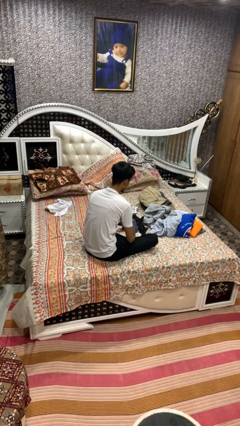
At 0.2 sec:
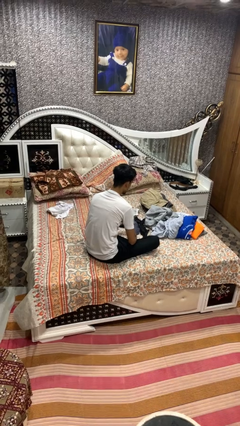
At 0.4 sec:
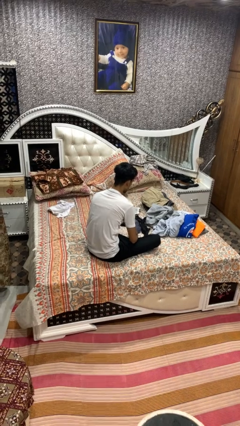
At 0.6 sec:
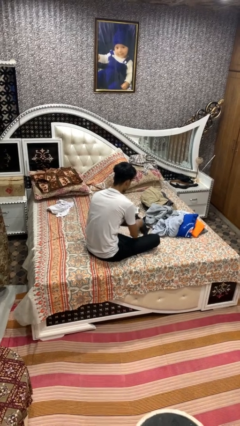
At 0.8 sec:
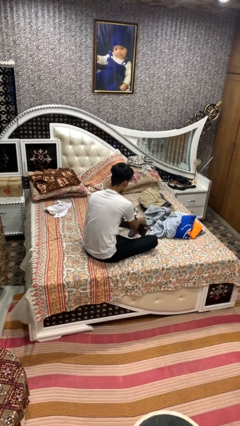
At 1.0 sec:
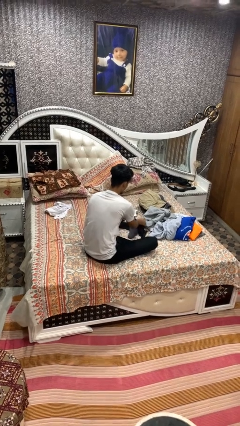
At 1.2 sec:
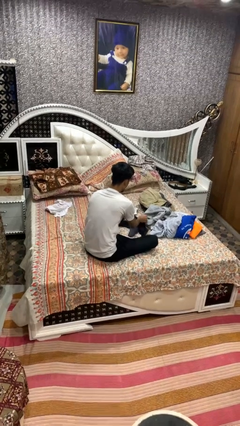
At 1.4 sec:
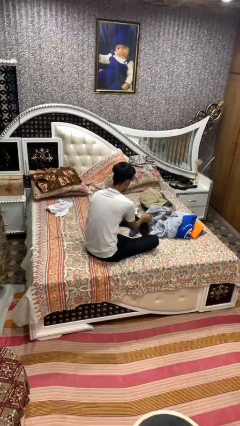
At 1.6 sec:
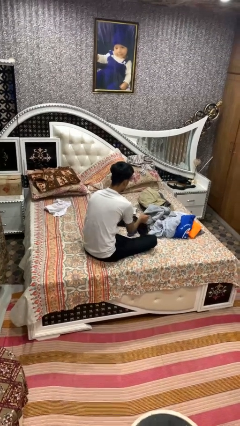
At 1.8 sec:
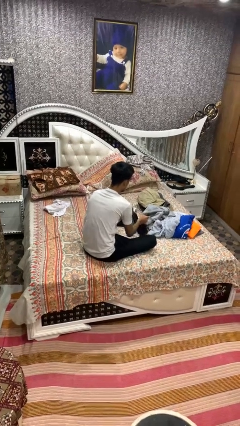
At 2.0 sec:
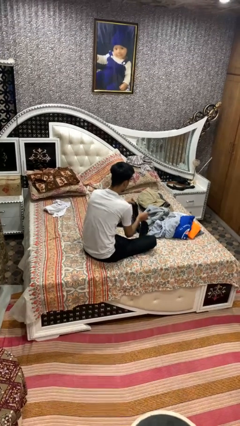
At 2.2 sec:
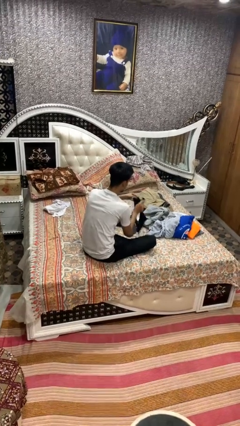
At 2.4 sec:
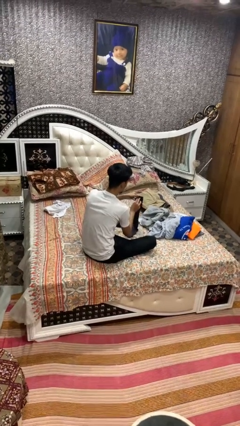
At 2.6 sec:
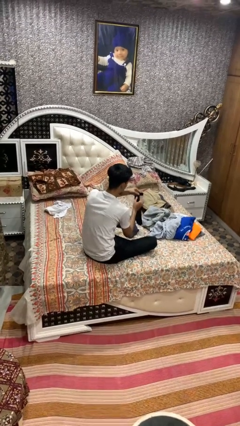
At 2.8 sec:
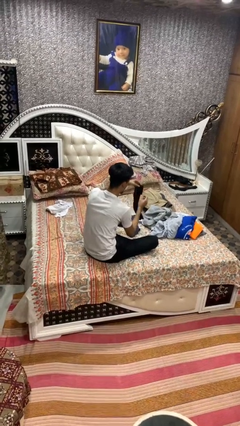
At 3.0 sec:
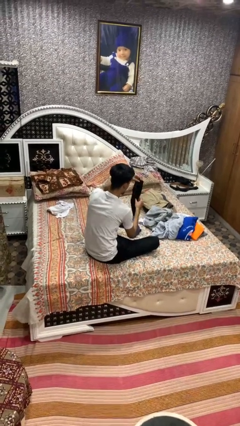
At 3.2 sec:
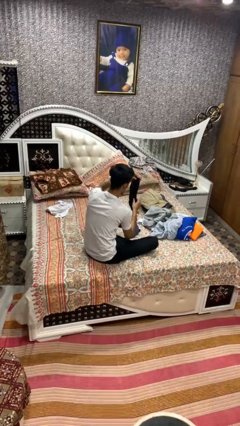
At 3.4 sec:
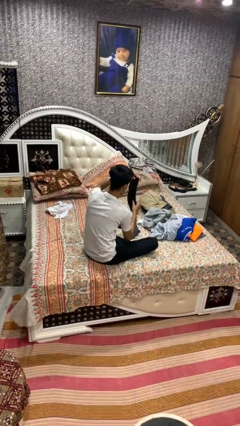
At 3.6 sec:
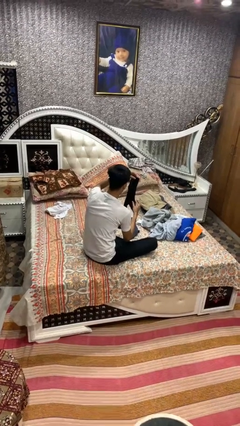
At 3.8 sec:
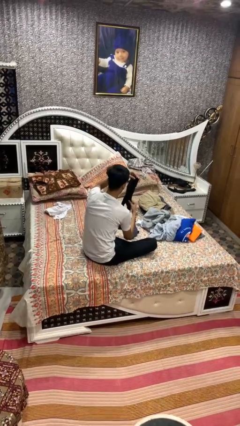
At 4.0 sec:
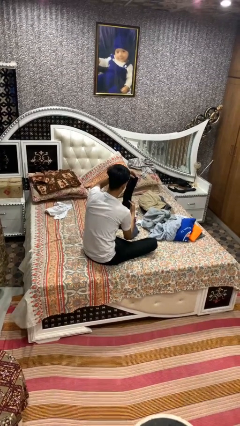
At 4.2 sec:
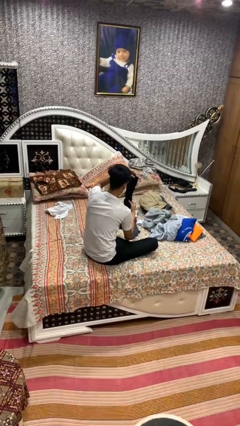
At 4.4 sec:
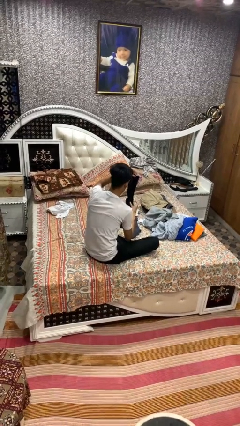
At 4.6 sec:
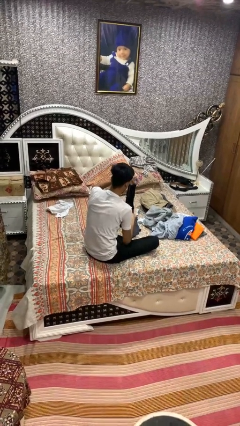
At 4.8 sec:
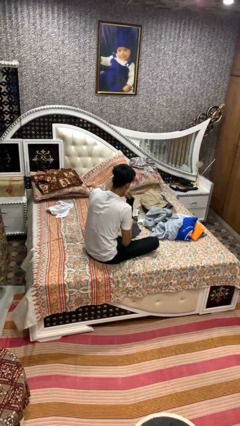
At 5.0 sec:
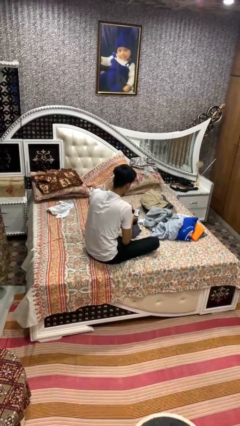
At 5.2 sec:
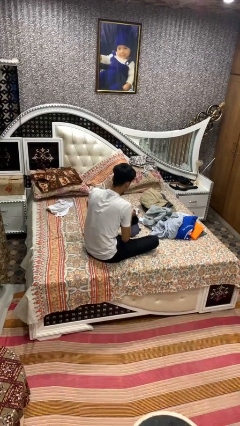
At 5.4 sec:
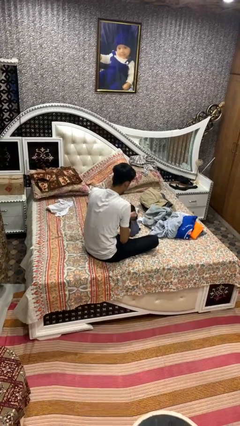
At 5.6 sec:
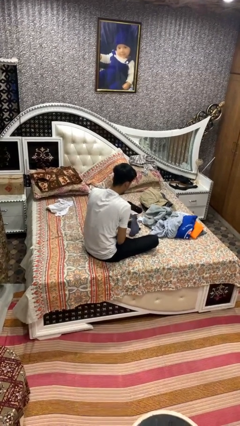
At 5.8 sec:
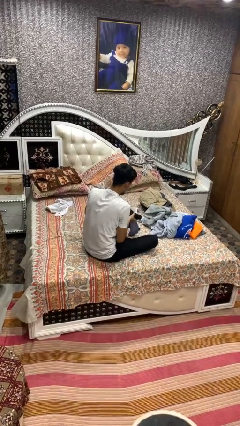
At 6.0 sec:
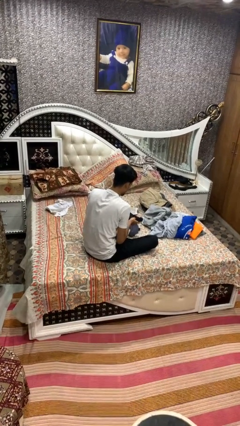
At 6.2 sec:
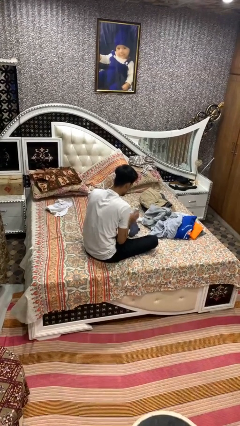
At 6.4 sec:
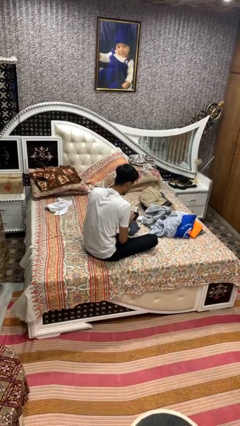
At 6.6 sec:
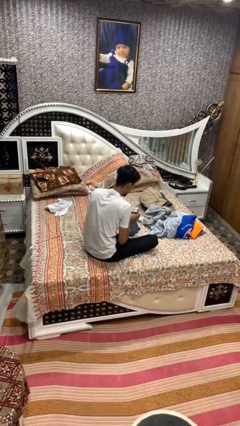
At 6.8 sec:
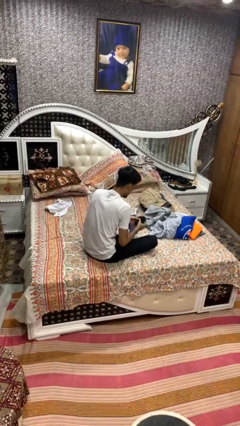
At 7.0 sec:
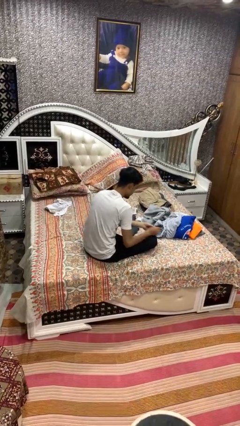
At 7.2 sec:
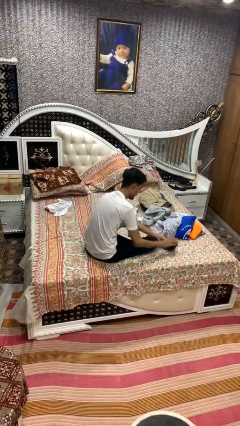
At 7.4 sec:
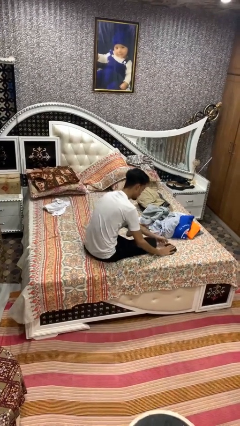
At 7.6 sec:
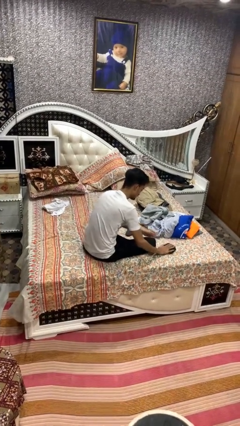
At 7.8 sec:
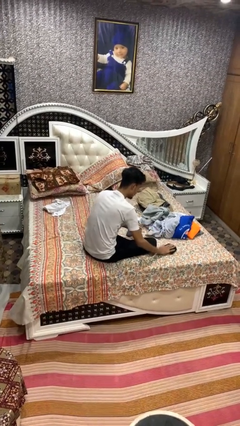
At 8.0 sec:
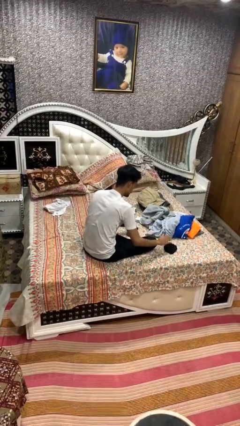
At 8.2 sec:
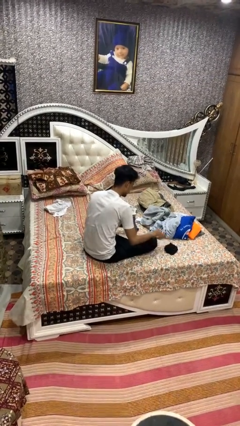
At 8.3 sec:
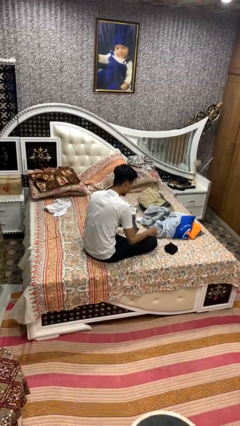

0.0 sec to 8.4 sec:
person folds socks

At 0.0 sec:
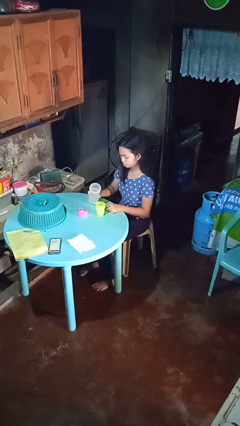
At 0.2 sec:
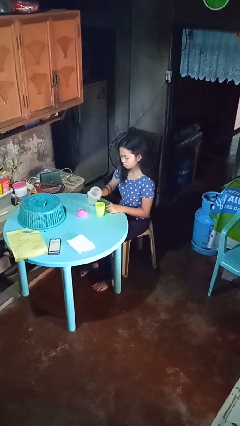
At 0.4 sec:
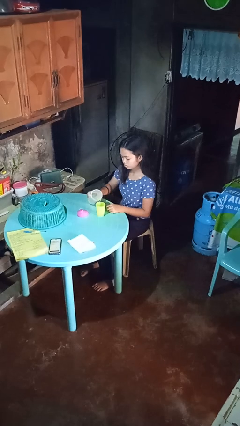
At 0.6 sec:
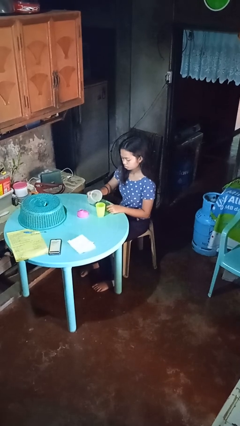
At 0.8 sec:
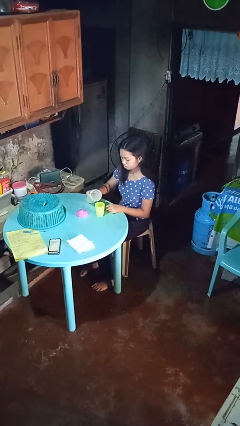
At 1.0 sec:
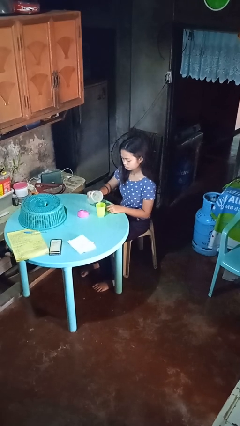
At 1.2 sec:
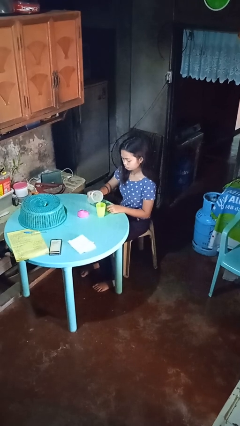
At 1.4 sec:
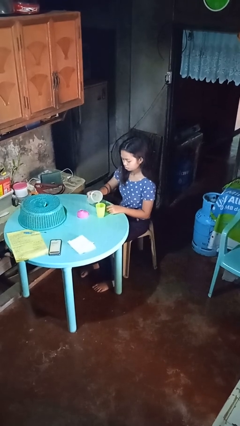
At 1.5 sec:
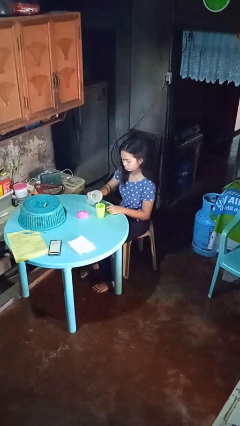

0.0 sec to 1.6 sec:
person pours liquid into cup

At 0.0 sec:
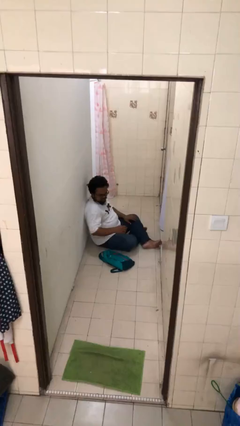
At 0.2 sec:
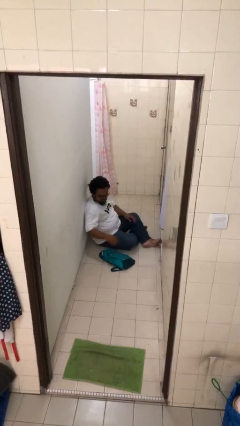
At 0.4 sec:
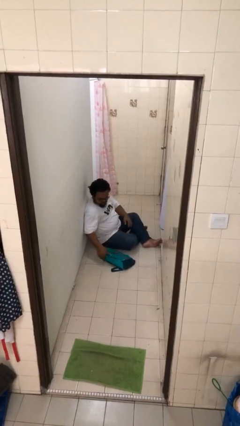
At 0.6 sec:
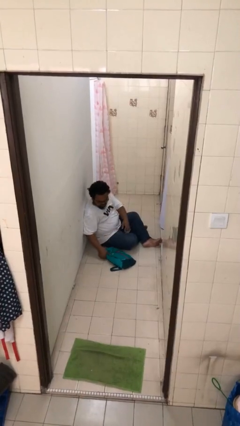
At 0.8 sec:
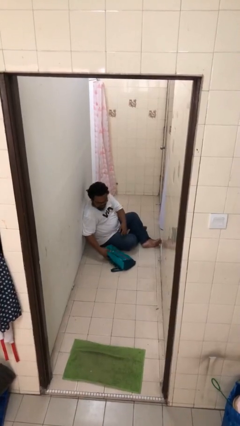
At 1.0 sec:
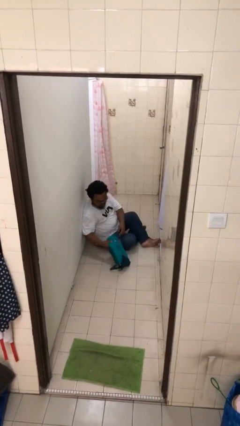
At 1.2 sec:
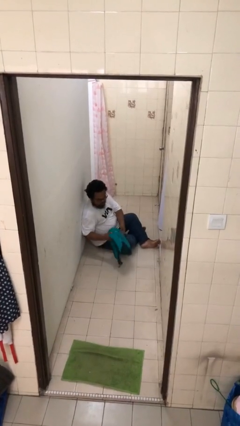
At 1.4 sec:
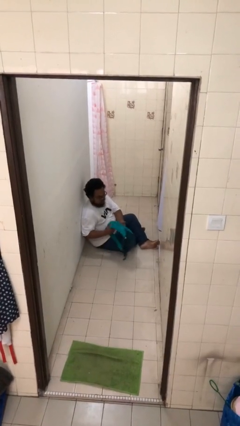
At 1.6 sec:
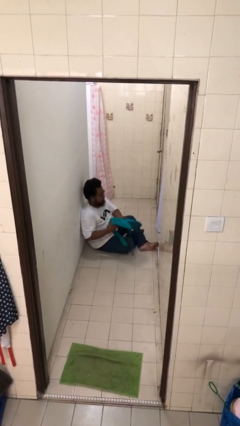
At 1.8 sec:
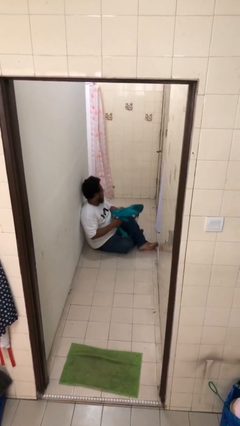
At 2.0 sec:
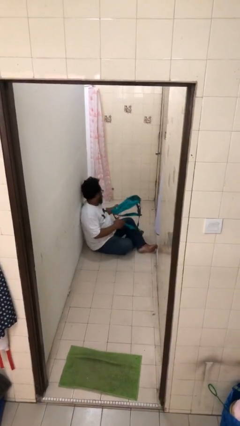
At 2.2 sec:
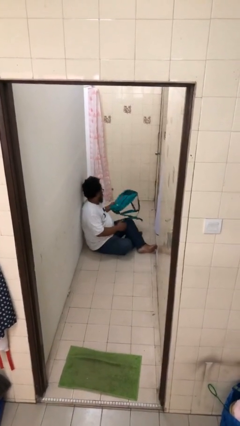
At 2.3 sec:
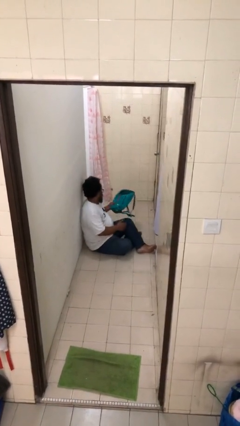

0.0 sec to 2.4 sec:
person picks up object from floor

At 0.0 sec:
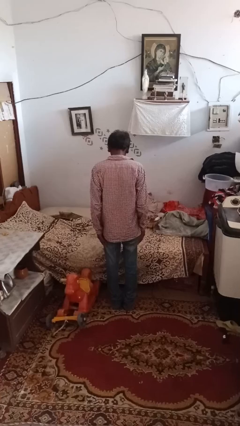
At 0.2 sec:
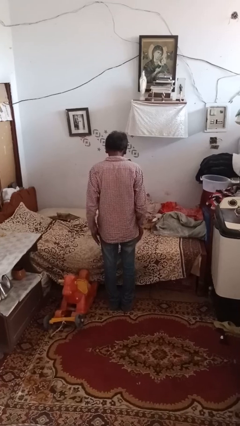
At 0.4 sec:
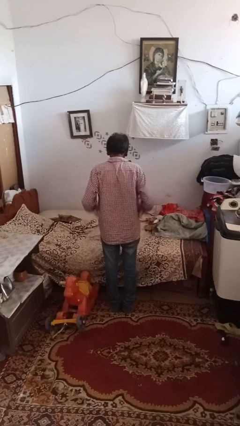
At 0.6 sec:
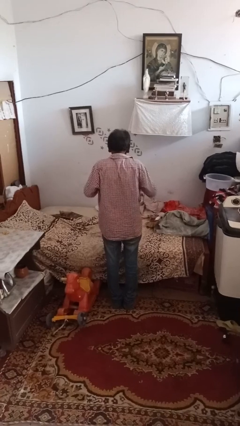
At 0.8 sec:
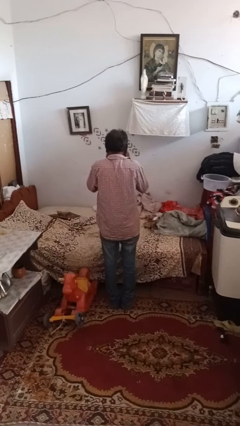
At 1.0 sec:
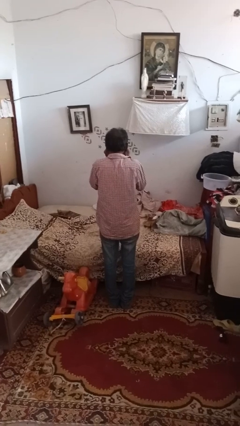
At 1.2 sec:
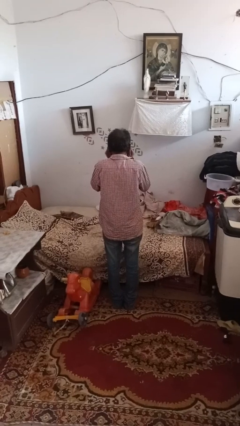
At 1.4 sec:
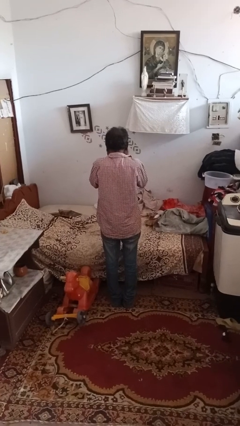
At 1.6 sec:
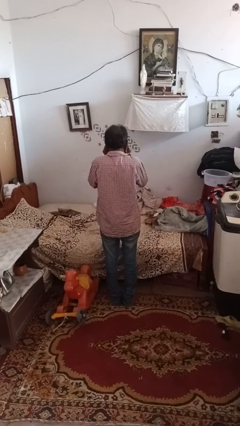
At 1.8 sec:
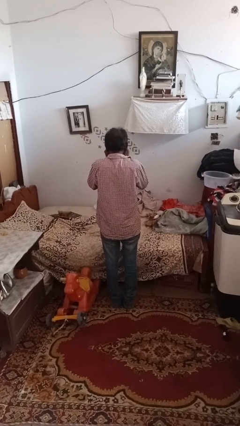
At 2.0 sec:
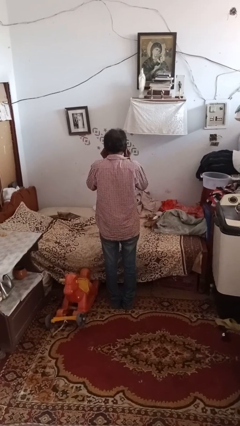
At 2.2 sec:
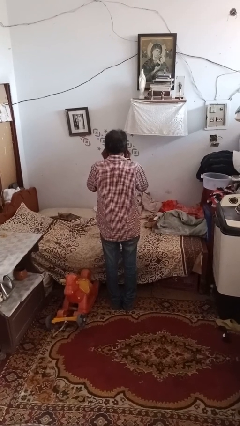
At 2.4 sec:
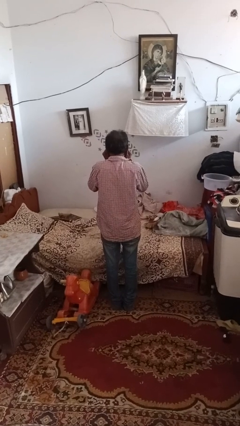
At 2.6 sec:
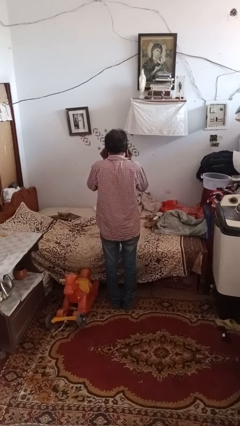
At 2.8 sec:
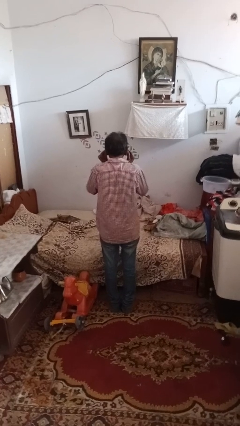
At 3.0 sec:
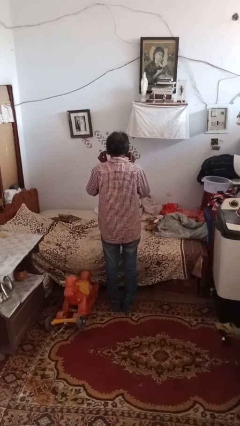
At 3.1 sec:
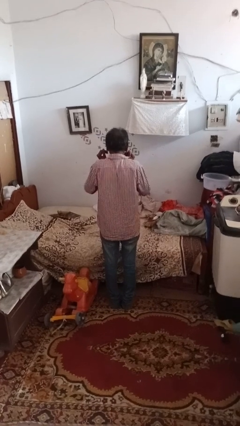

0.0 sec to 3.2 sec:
person rubs eyes

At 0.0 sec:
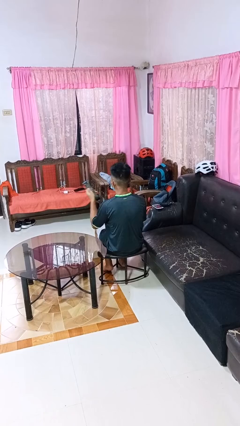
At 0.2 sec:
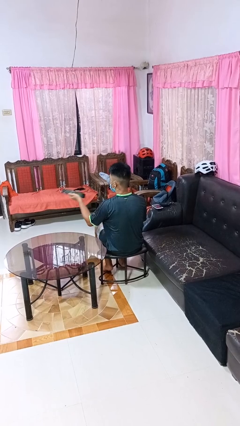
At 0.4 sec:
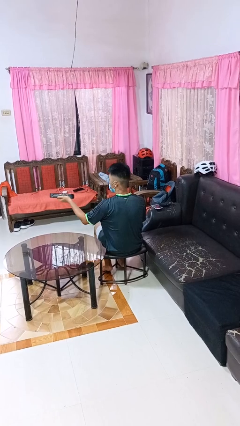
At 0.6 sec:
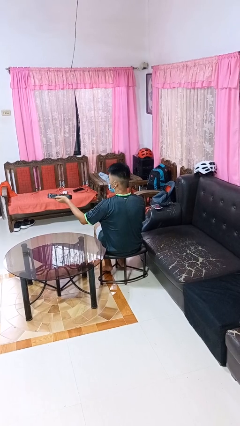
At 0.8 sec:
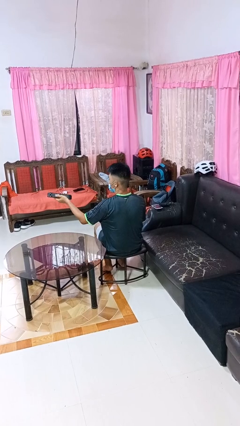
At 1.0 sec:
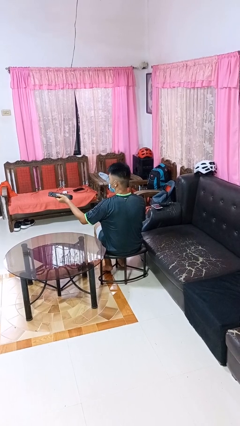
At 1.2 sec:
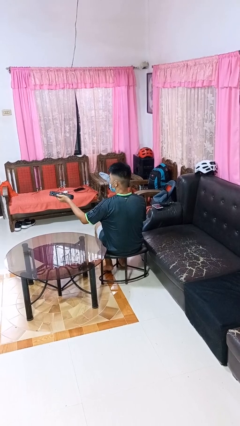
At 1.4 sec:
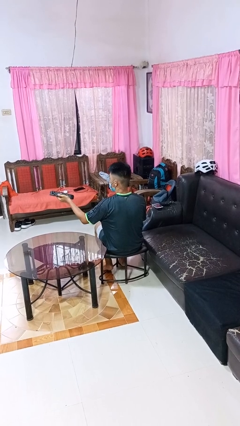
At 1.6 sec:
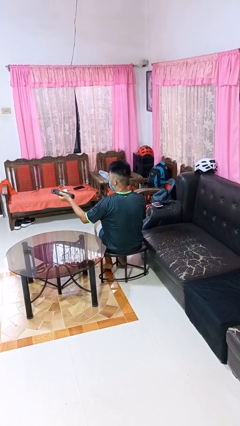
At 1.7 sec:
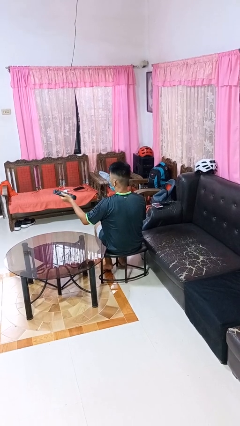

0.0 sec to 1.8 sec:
person uses television remote
